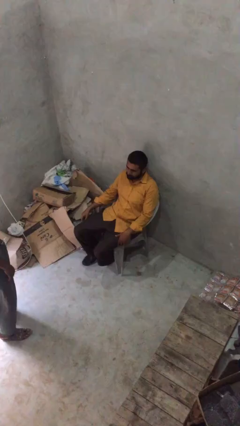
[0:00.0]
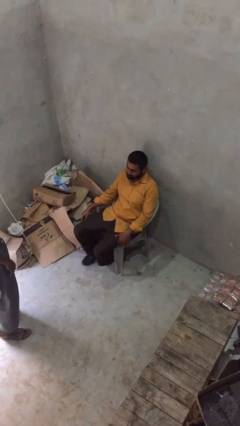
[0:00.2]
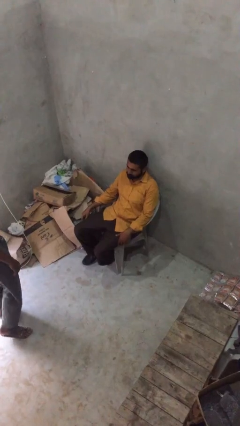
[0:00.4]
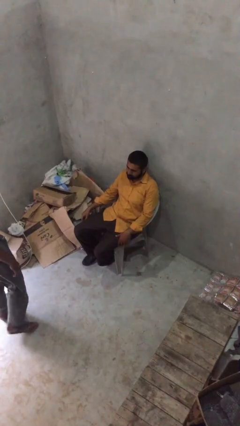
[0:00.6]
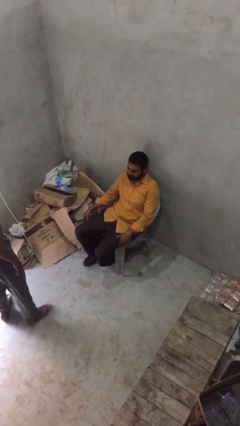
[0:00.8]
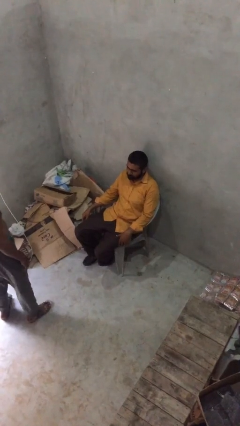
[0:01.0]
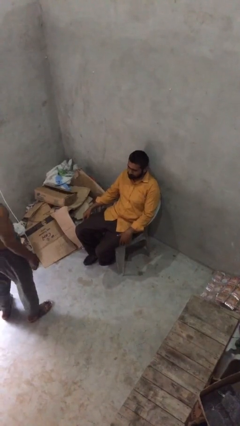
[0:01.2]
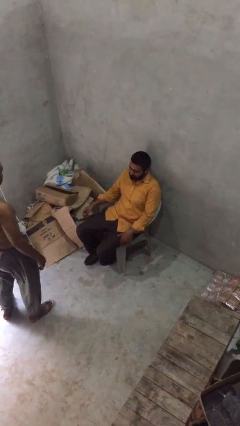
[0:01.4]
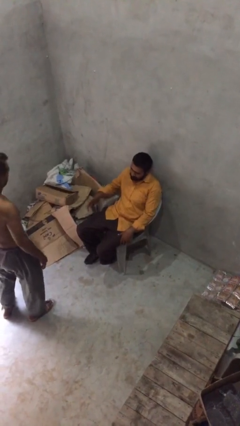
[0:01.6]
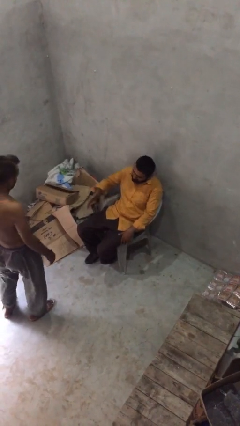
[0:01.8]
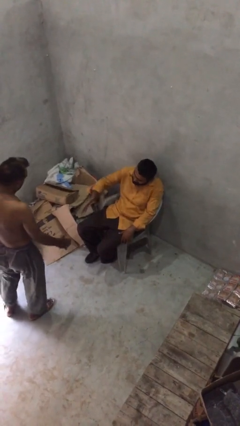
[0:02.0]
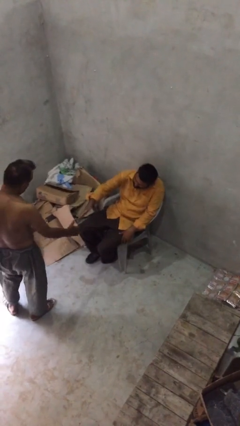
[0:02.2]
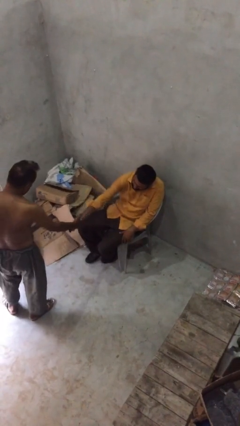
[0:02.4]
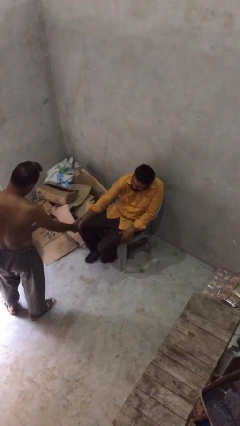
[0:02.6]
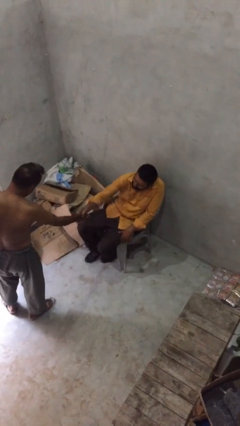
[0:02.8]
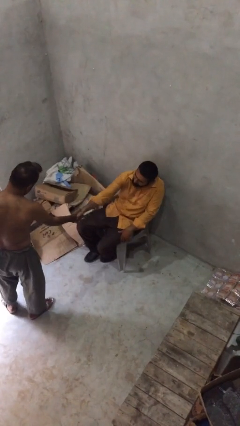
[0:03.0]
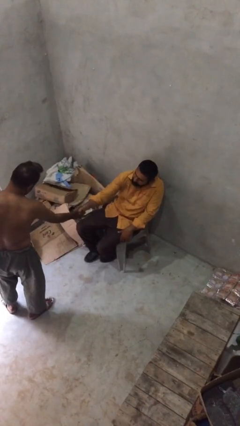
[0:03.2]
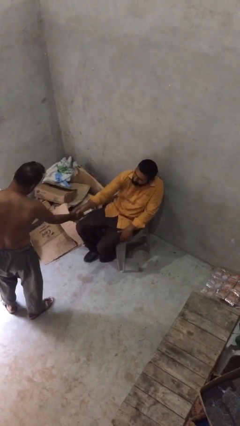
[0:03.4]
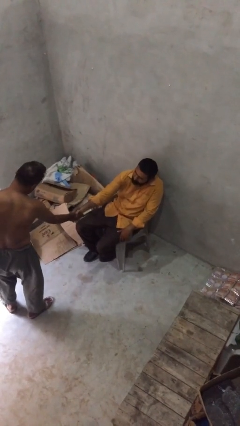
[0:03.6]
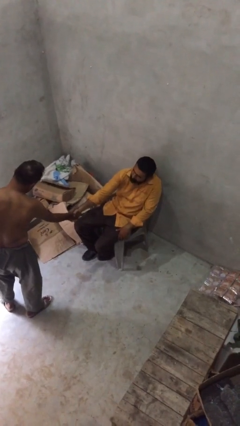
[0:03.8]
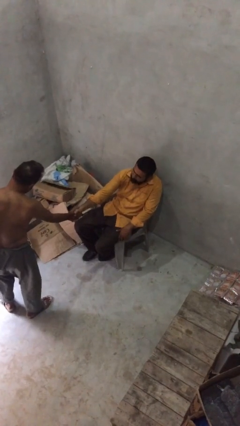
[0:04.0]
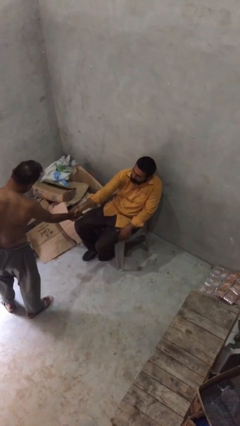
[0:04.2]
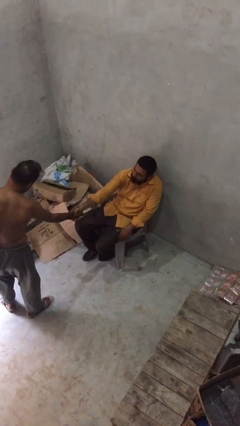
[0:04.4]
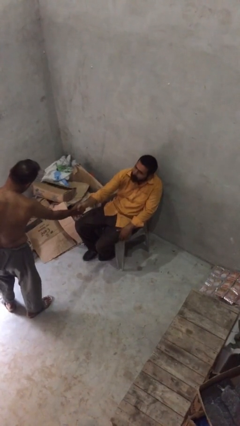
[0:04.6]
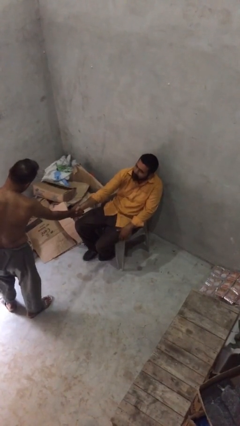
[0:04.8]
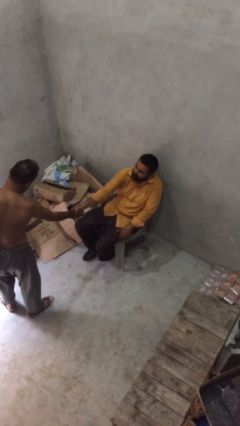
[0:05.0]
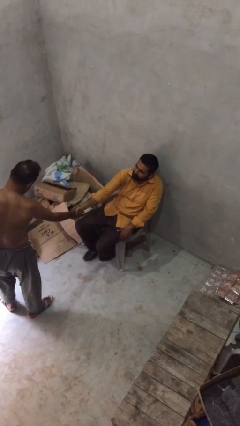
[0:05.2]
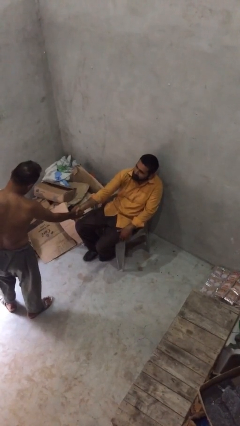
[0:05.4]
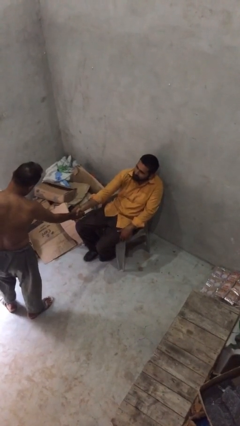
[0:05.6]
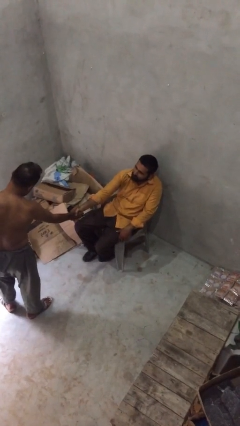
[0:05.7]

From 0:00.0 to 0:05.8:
person shakes hand

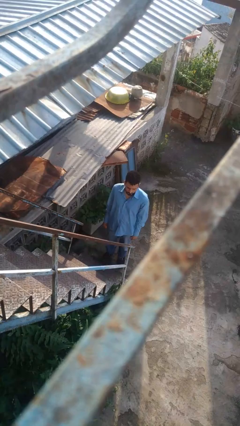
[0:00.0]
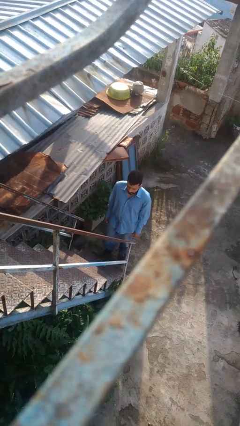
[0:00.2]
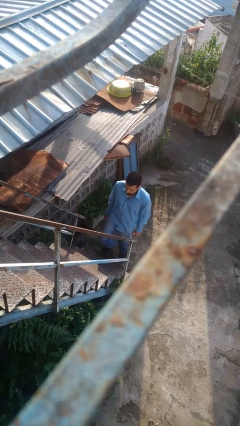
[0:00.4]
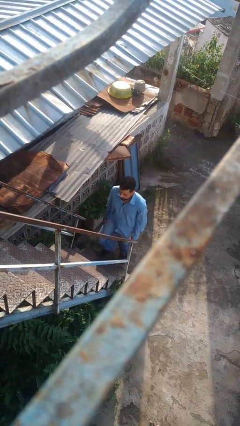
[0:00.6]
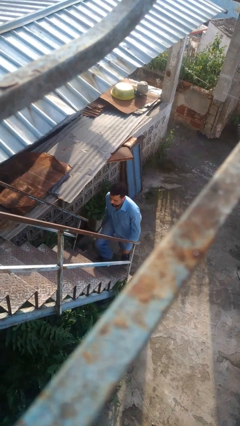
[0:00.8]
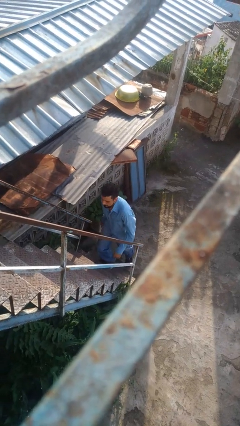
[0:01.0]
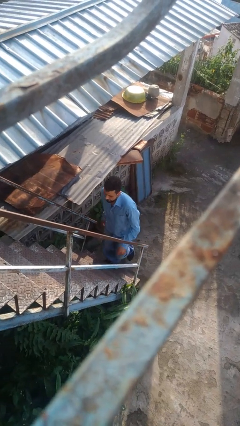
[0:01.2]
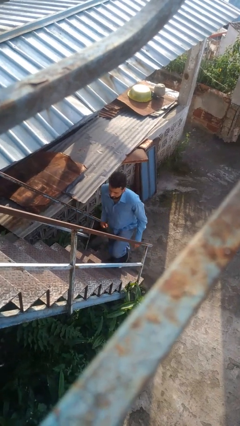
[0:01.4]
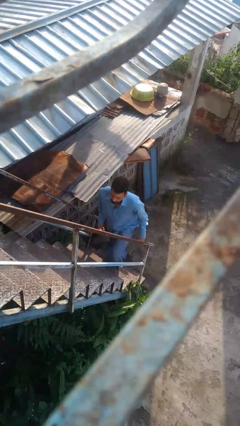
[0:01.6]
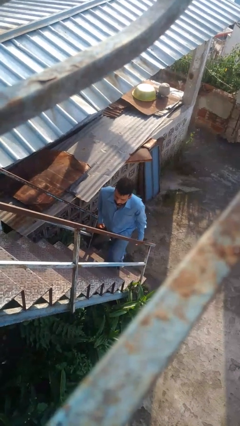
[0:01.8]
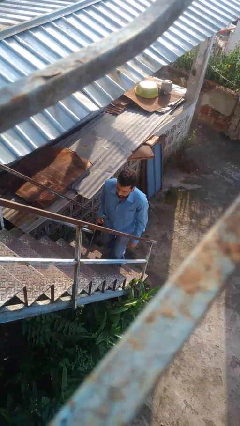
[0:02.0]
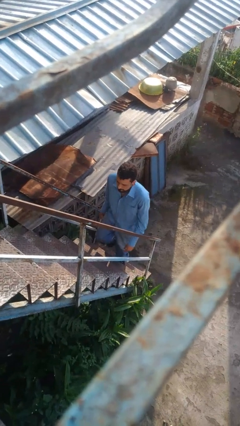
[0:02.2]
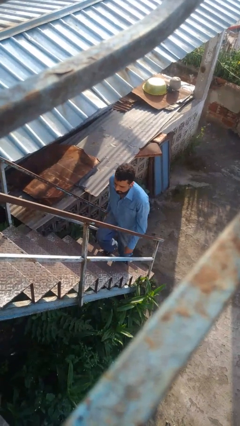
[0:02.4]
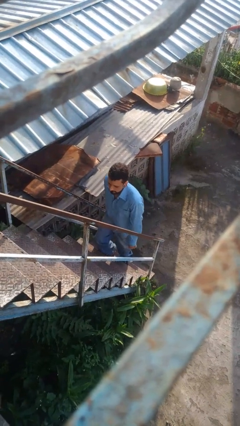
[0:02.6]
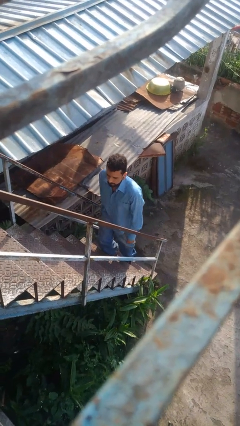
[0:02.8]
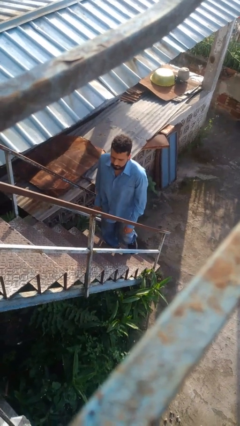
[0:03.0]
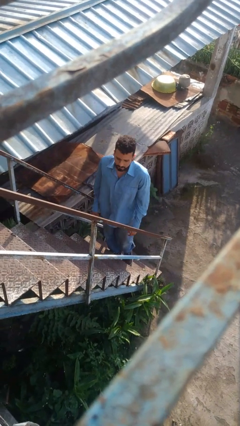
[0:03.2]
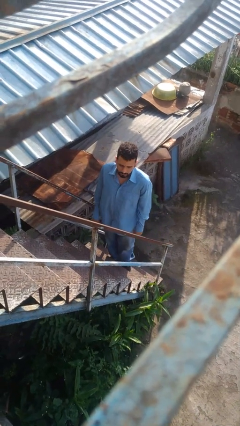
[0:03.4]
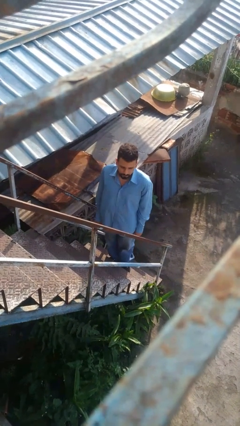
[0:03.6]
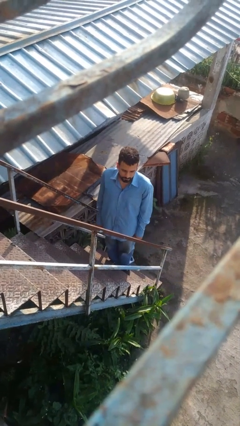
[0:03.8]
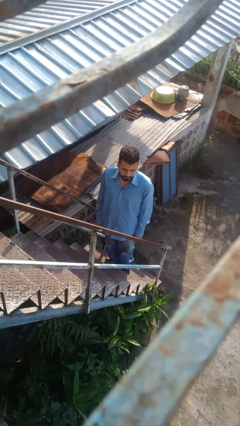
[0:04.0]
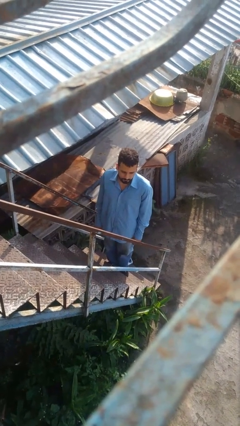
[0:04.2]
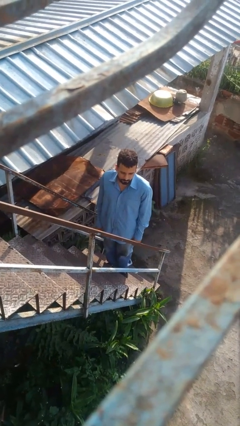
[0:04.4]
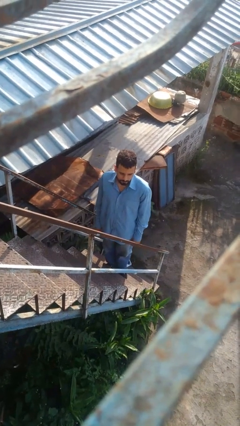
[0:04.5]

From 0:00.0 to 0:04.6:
person climbs up stairs

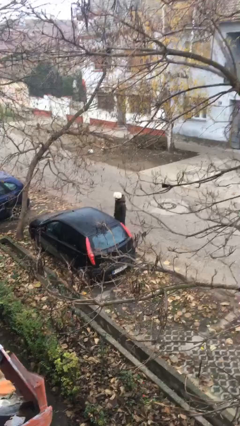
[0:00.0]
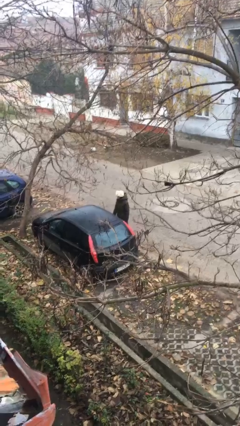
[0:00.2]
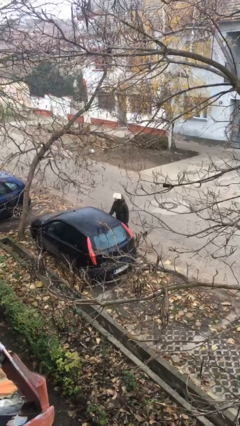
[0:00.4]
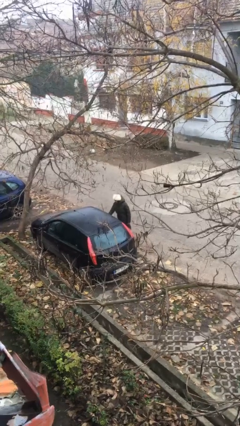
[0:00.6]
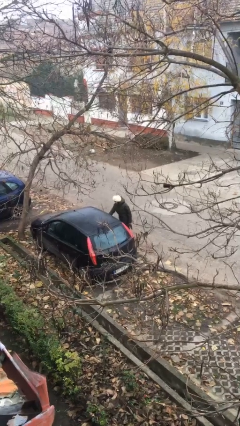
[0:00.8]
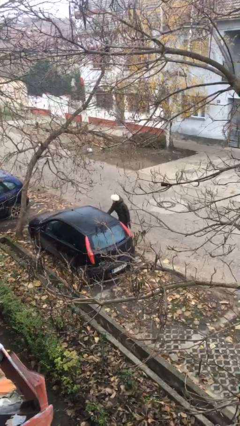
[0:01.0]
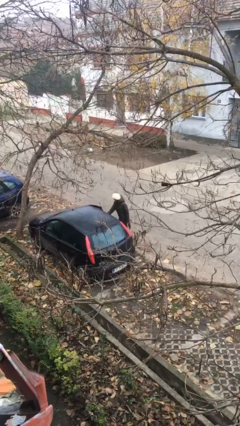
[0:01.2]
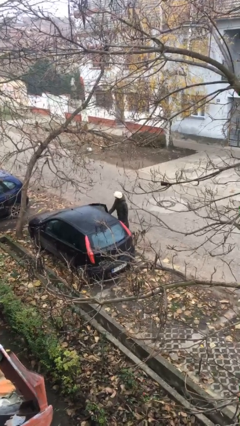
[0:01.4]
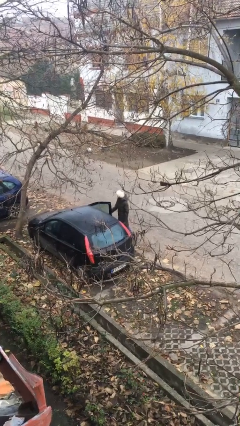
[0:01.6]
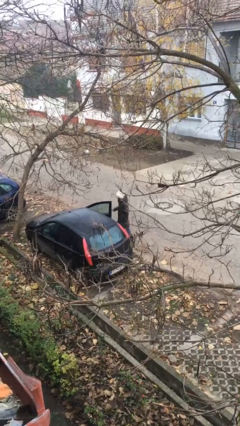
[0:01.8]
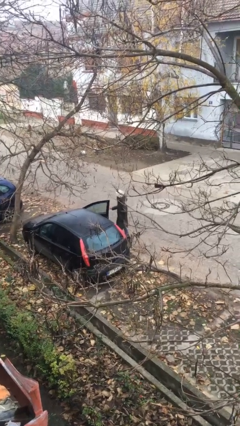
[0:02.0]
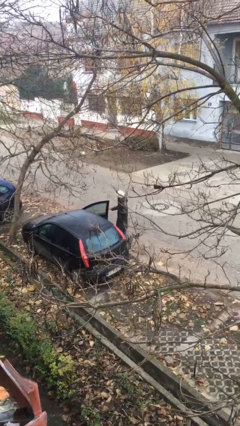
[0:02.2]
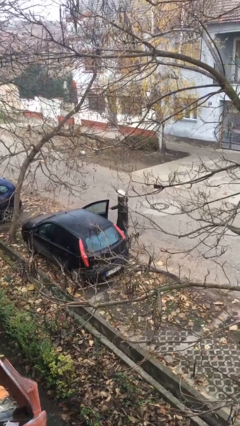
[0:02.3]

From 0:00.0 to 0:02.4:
person opens car door

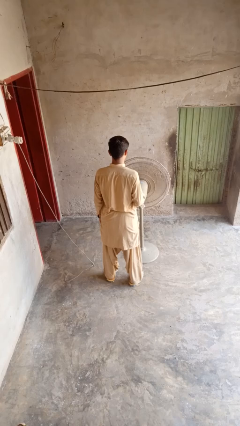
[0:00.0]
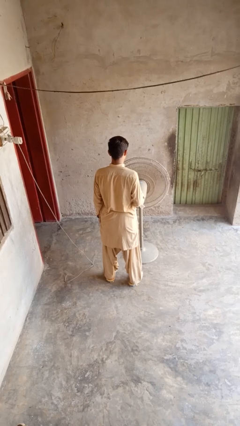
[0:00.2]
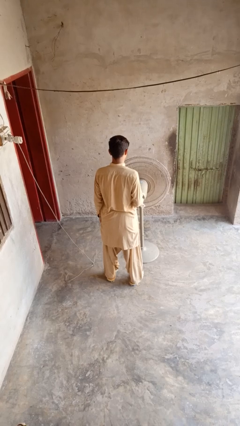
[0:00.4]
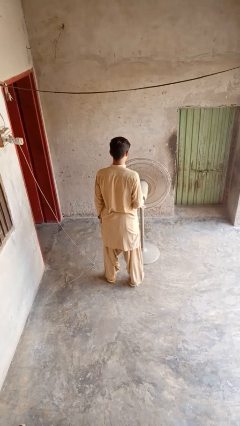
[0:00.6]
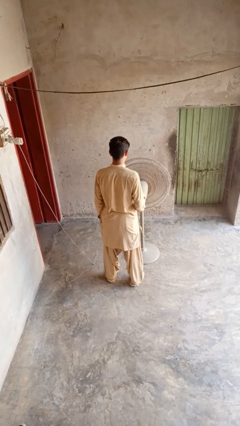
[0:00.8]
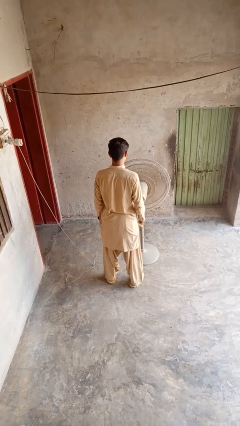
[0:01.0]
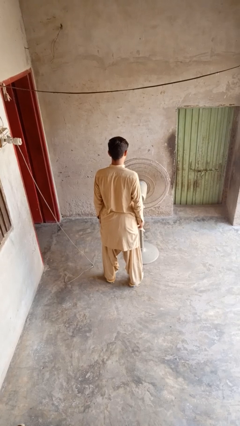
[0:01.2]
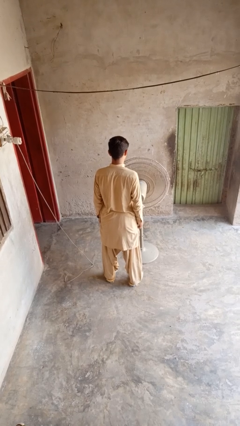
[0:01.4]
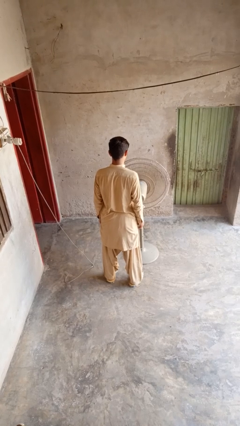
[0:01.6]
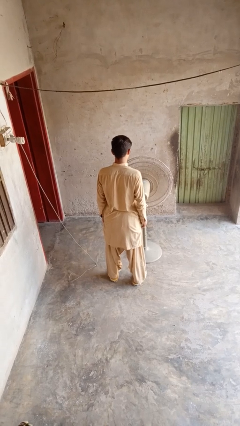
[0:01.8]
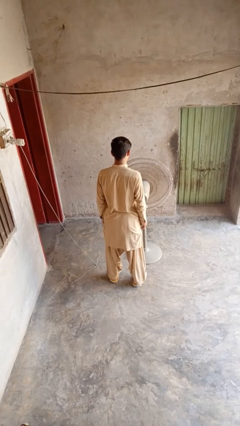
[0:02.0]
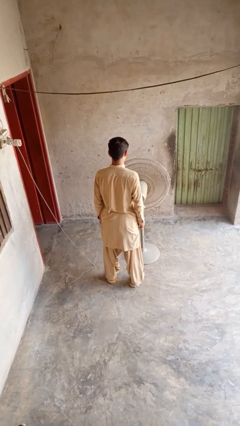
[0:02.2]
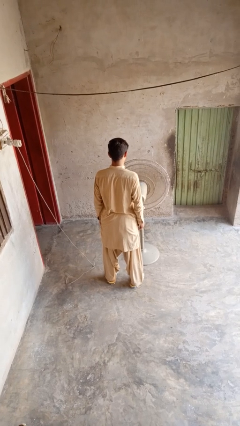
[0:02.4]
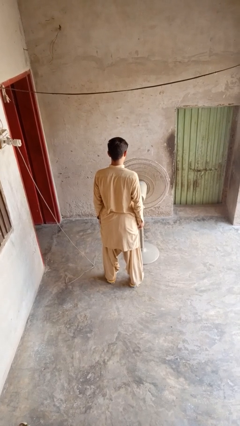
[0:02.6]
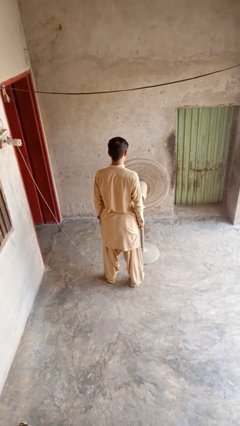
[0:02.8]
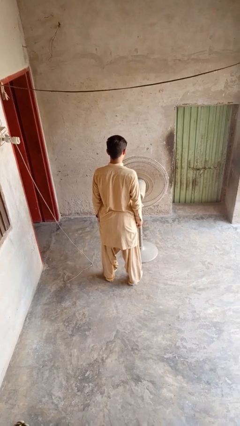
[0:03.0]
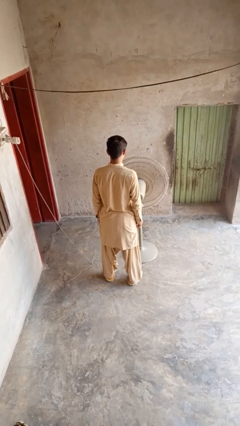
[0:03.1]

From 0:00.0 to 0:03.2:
person turns off fan

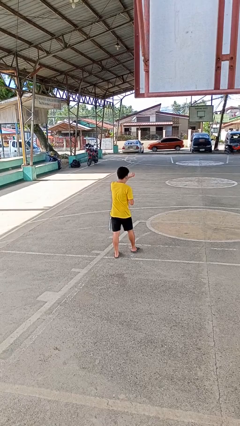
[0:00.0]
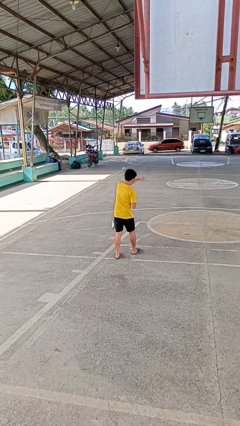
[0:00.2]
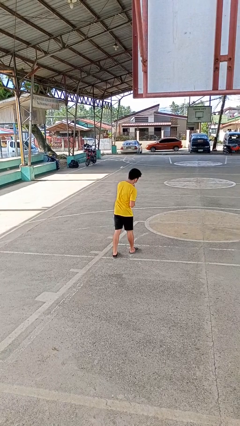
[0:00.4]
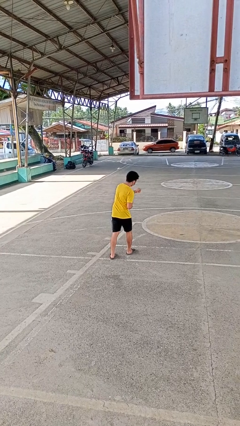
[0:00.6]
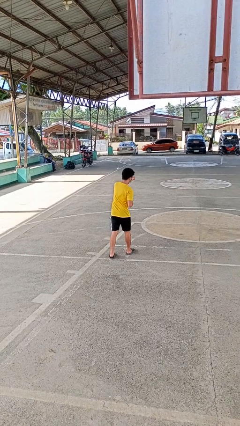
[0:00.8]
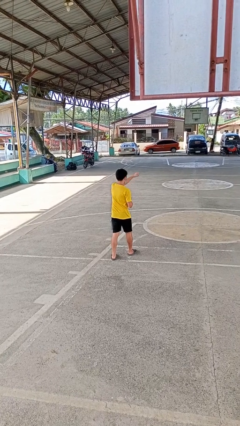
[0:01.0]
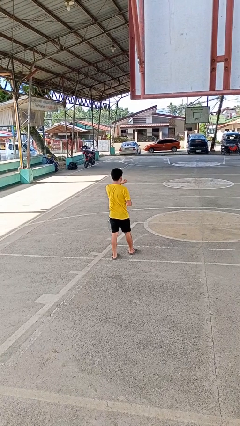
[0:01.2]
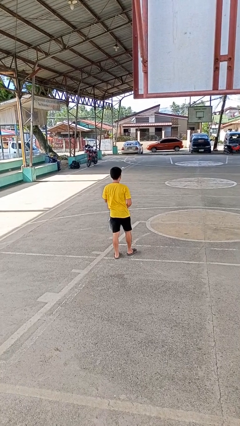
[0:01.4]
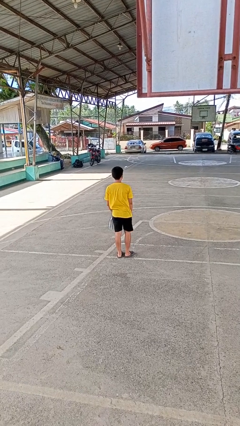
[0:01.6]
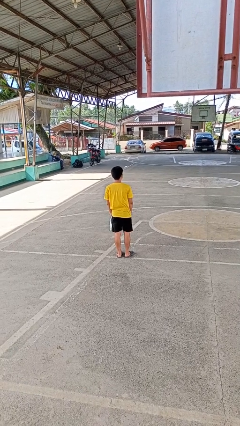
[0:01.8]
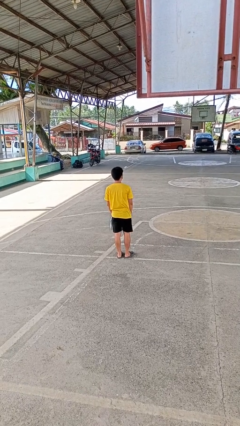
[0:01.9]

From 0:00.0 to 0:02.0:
person punches
